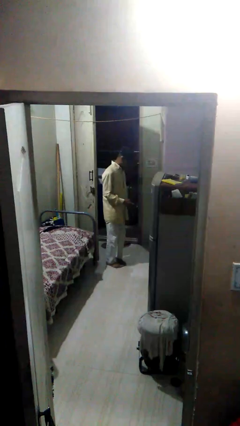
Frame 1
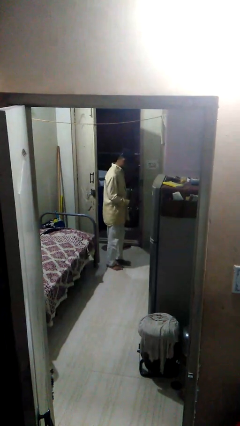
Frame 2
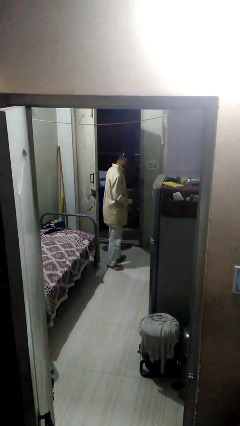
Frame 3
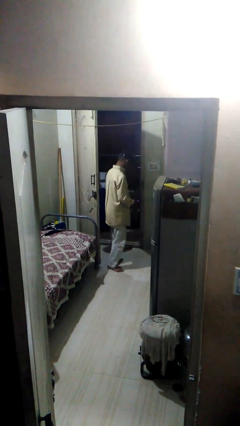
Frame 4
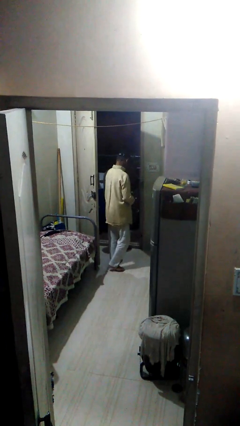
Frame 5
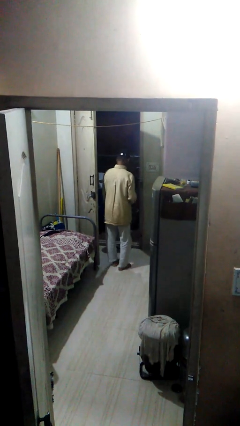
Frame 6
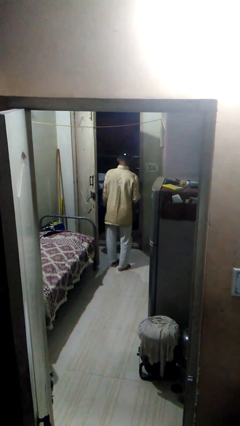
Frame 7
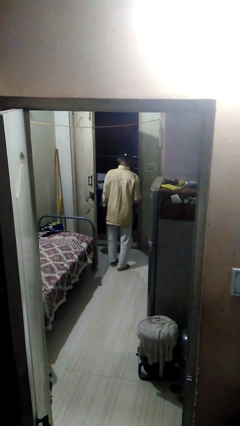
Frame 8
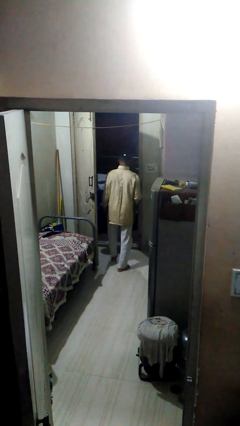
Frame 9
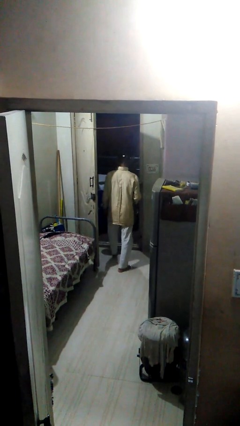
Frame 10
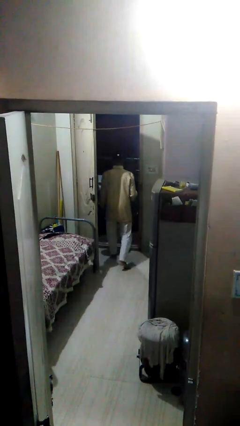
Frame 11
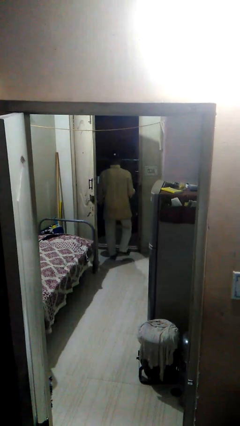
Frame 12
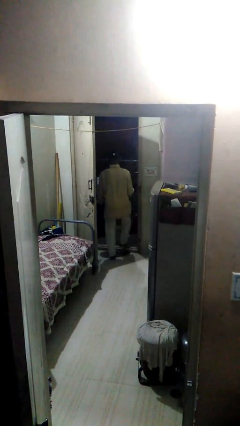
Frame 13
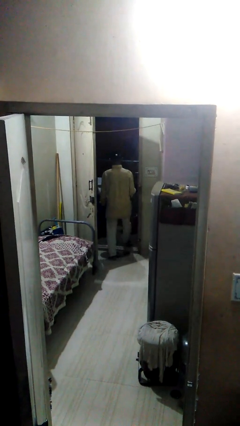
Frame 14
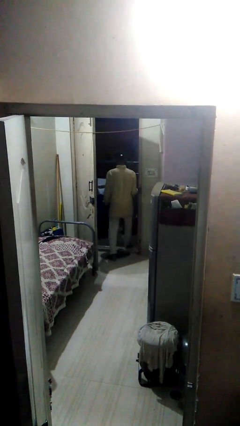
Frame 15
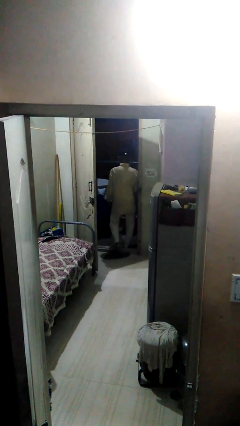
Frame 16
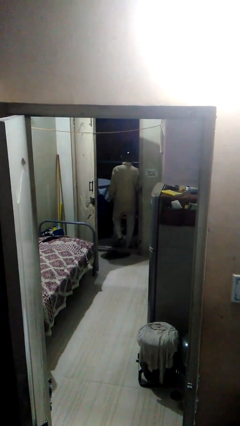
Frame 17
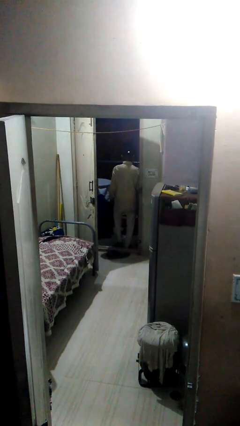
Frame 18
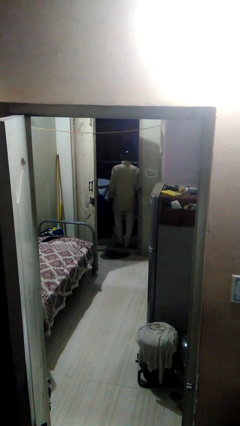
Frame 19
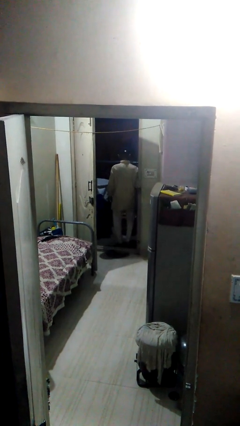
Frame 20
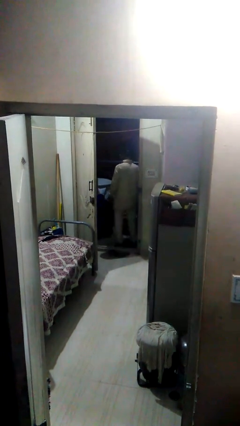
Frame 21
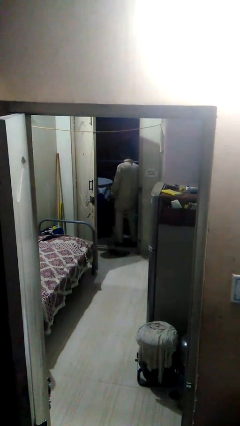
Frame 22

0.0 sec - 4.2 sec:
person exits scene through structure

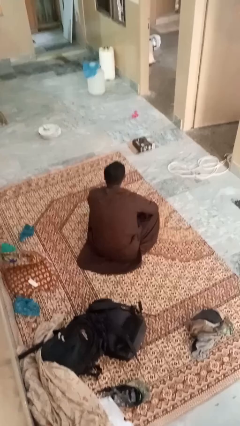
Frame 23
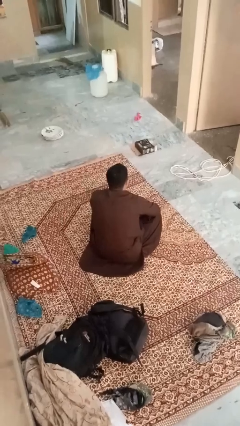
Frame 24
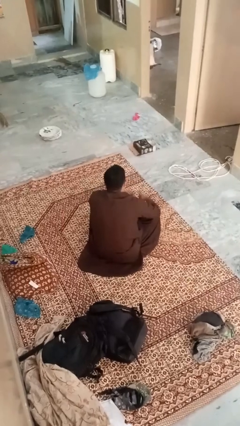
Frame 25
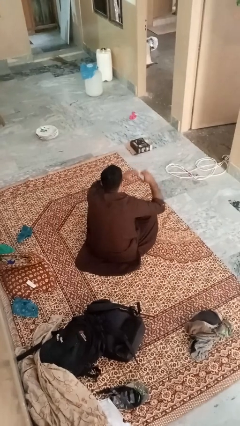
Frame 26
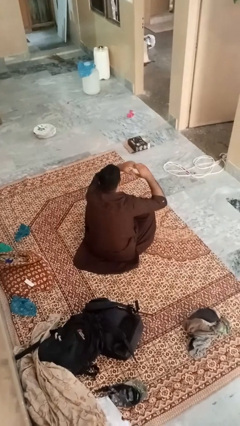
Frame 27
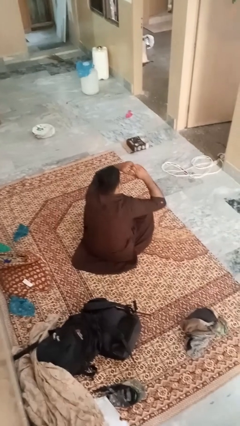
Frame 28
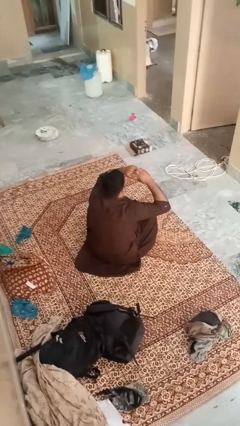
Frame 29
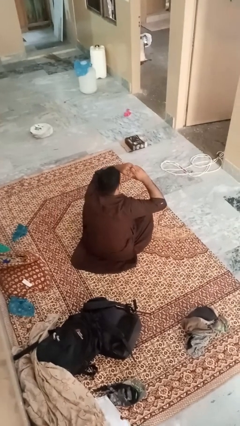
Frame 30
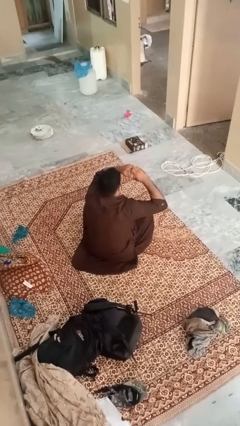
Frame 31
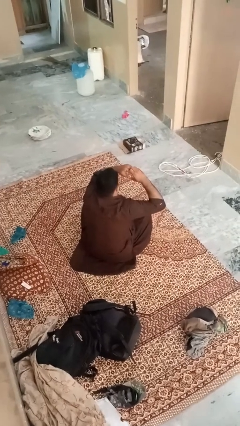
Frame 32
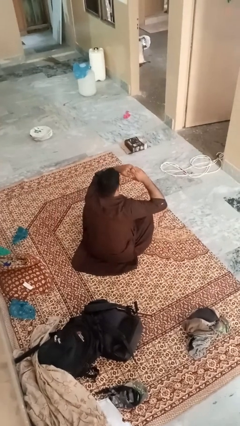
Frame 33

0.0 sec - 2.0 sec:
person gestures heart

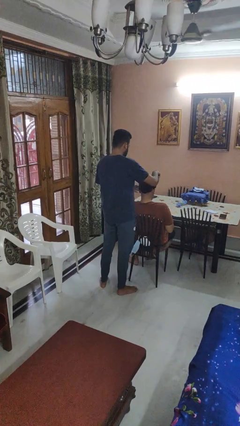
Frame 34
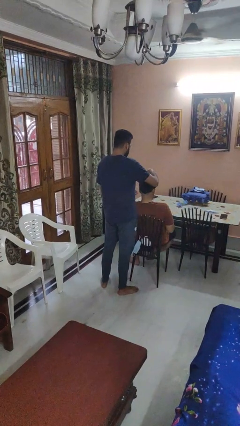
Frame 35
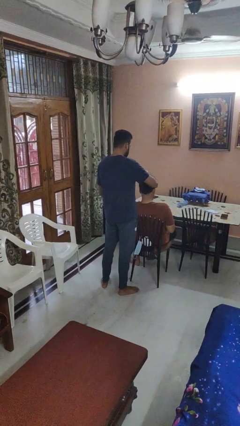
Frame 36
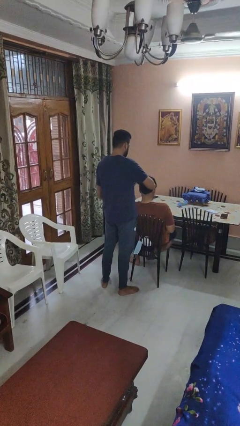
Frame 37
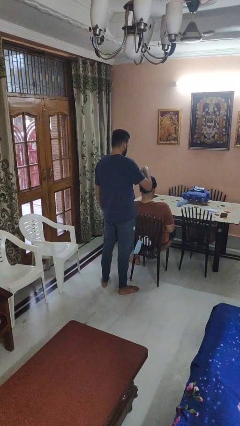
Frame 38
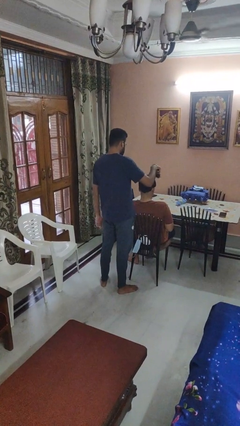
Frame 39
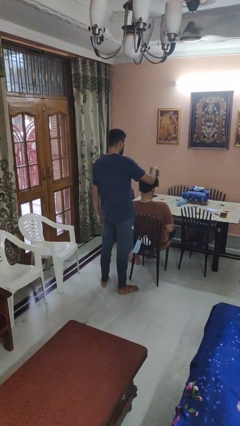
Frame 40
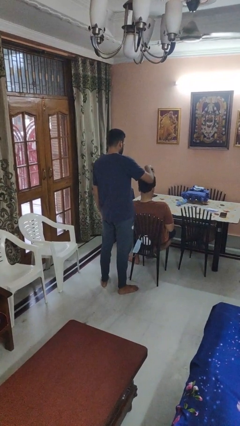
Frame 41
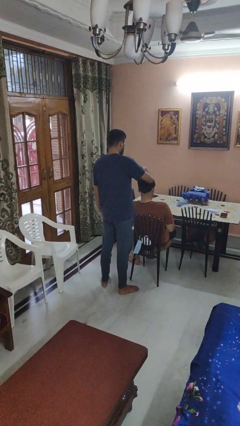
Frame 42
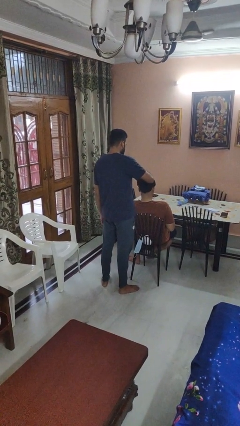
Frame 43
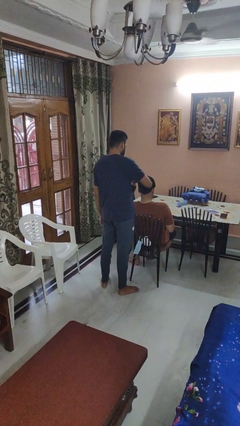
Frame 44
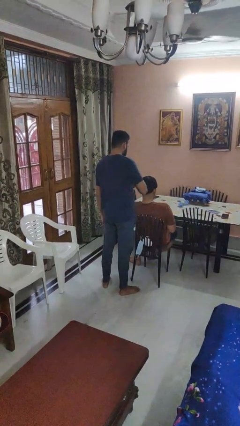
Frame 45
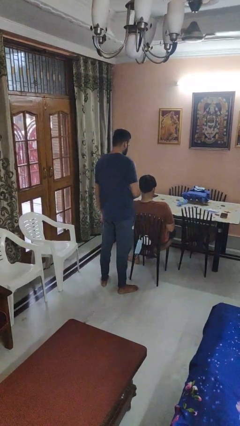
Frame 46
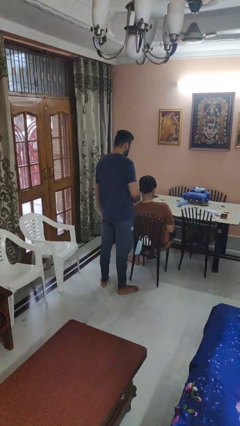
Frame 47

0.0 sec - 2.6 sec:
person brushes hair of person

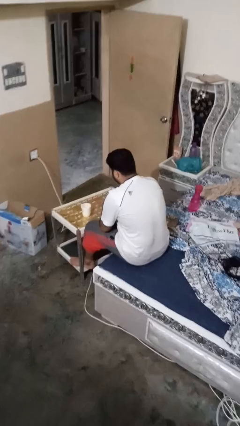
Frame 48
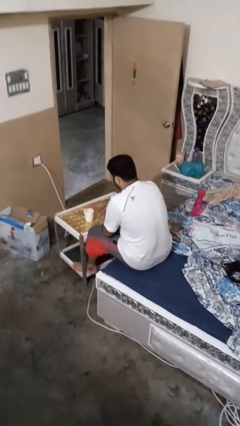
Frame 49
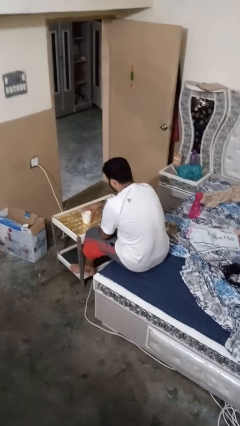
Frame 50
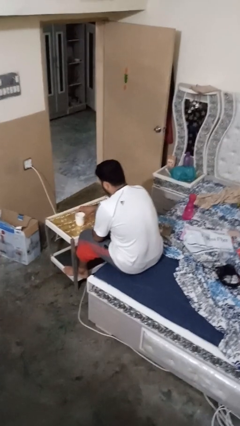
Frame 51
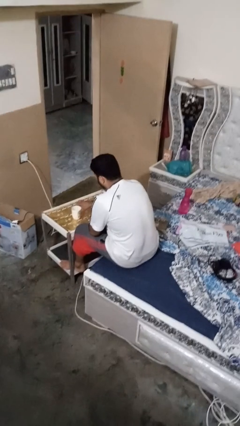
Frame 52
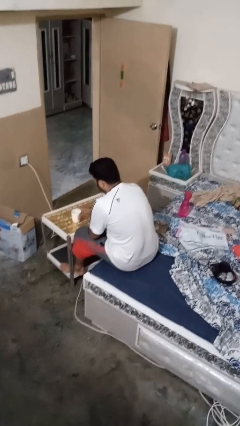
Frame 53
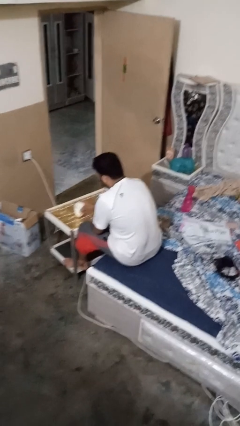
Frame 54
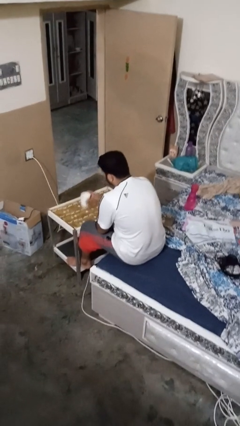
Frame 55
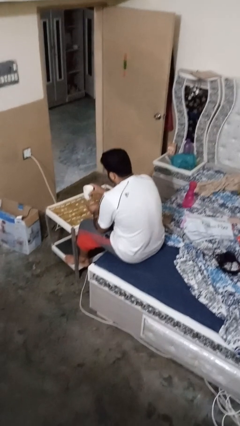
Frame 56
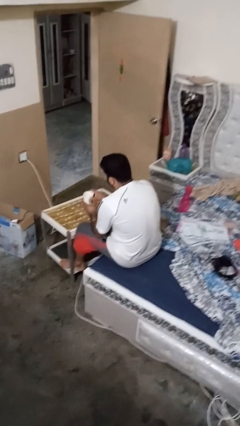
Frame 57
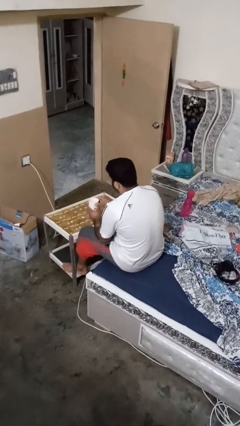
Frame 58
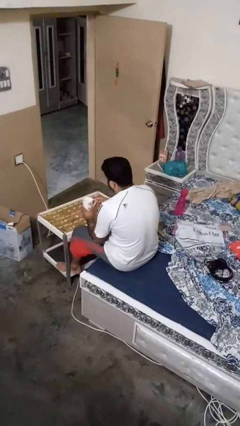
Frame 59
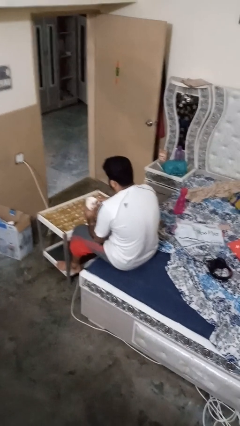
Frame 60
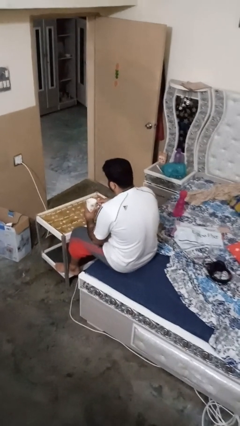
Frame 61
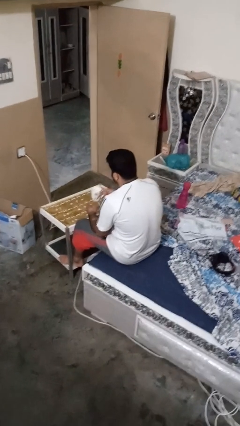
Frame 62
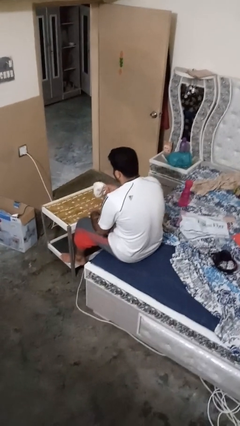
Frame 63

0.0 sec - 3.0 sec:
person picks up object from table

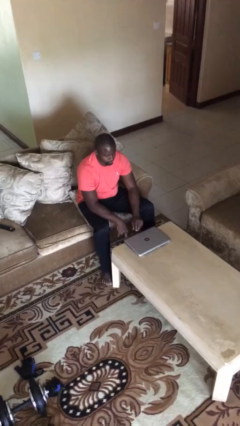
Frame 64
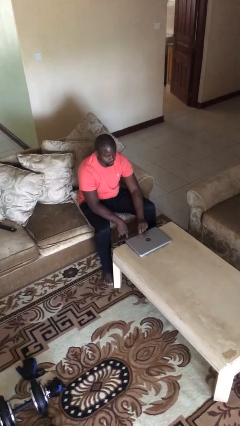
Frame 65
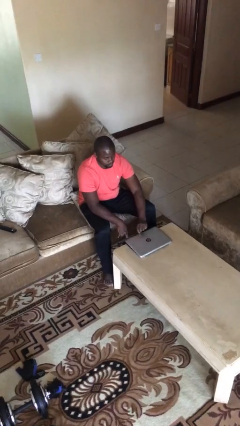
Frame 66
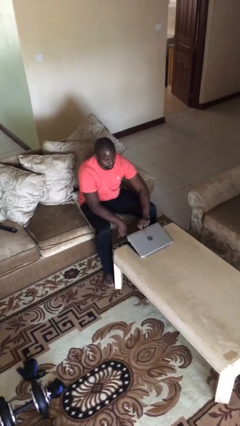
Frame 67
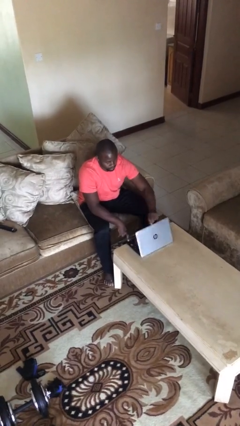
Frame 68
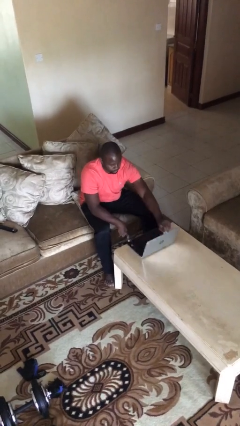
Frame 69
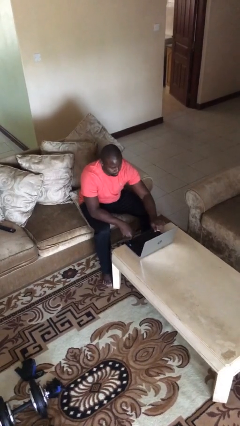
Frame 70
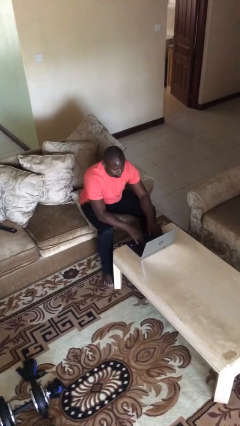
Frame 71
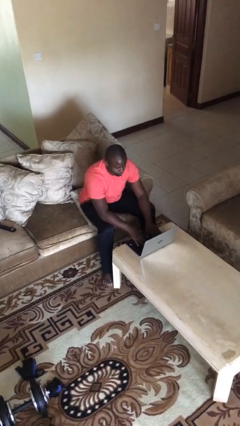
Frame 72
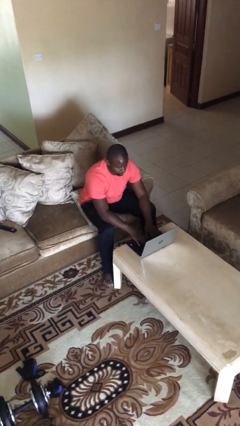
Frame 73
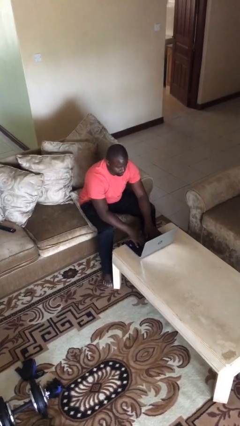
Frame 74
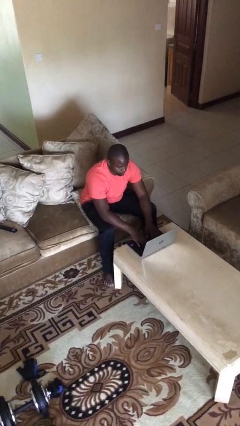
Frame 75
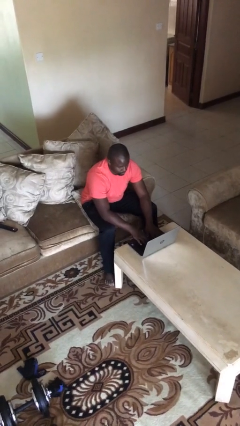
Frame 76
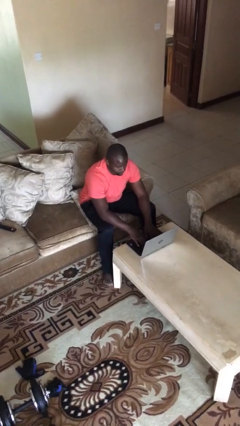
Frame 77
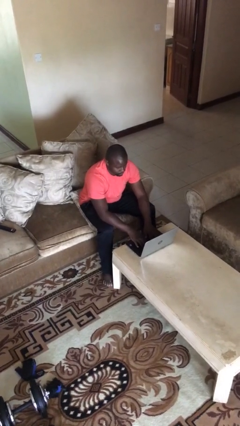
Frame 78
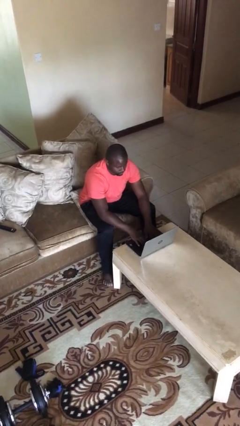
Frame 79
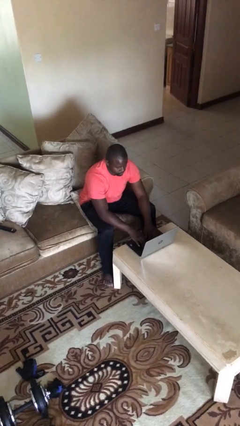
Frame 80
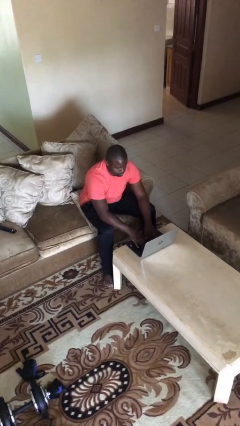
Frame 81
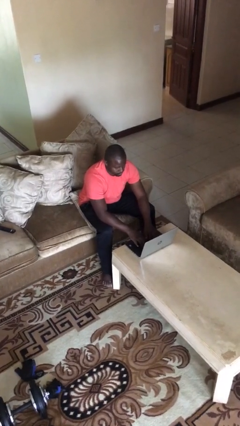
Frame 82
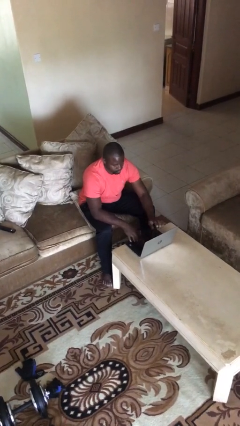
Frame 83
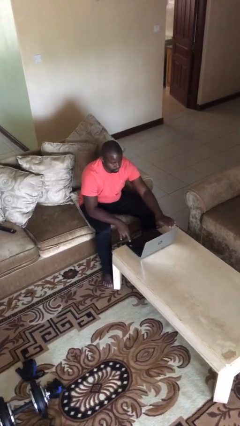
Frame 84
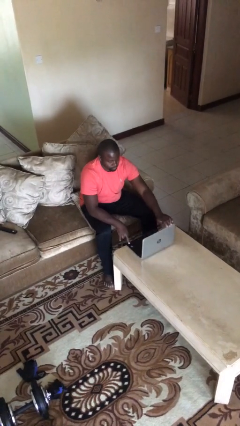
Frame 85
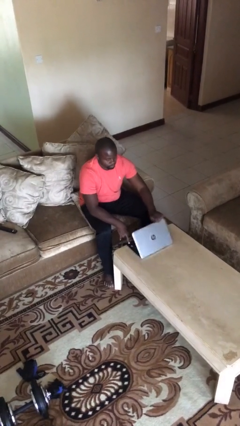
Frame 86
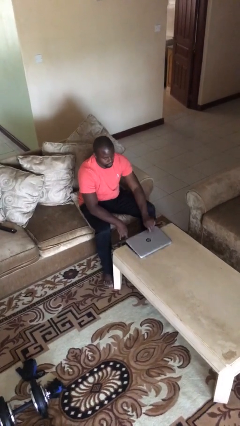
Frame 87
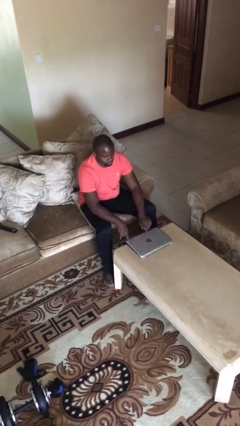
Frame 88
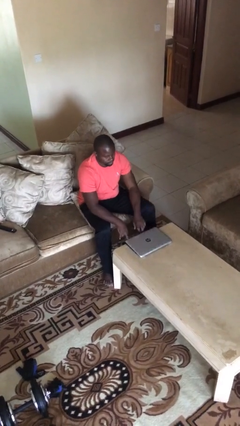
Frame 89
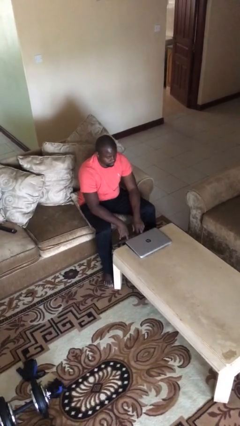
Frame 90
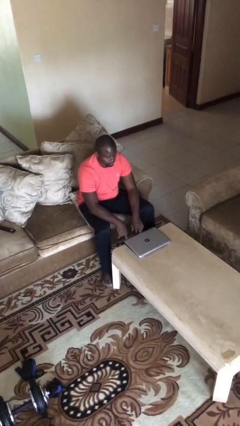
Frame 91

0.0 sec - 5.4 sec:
person interacts with laptop

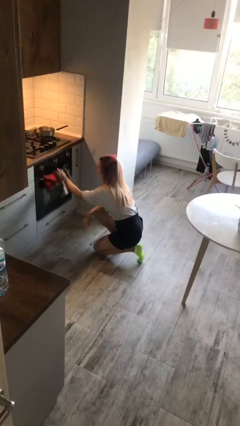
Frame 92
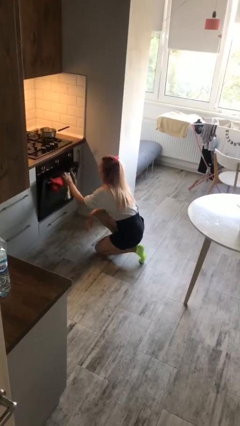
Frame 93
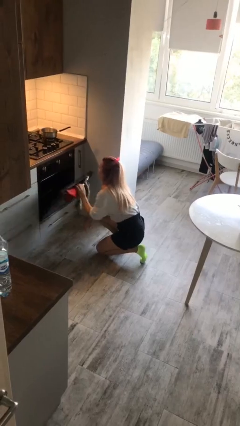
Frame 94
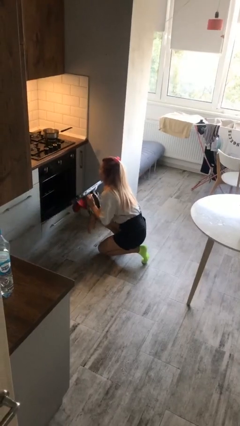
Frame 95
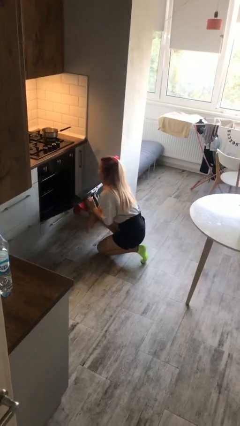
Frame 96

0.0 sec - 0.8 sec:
person opens oven door
